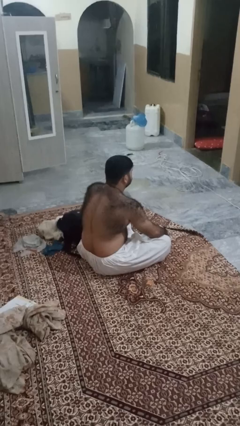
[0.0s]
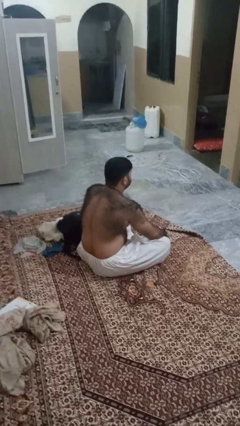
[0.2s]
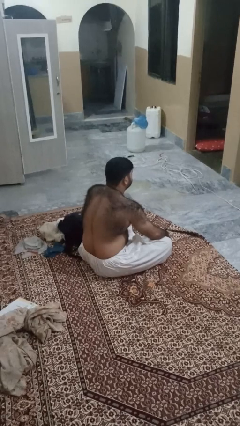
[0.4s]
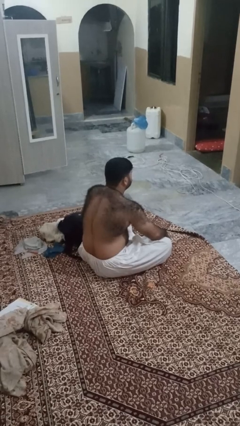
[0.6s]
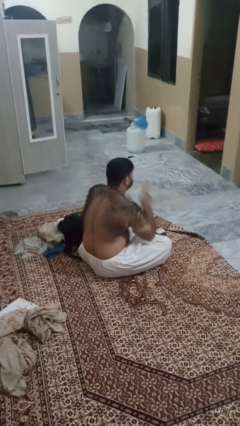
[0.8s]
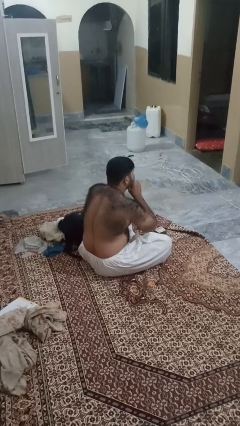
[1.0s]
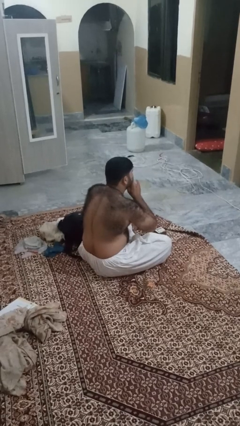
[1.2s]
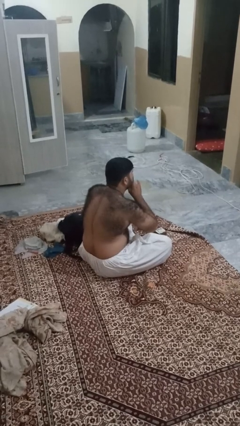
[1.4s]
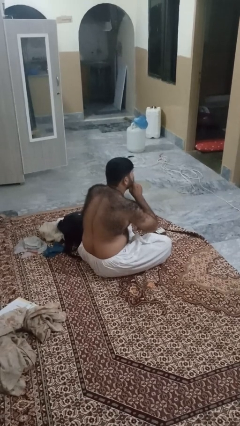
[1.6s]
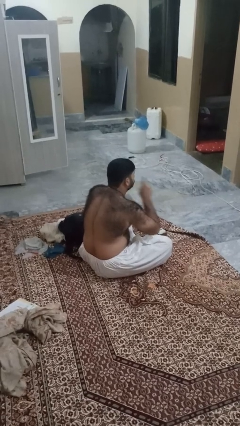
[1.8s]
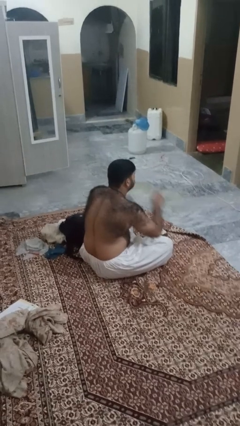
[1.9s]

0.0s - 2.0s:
person gestures be quiet

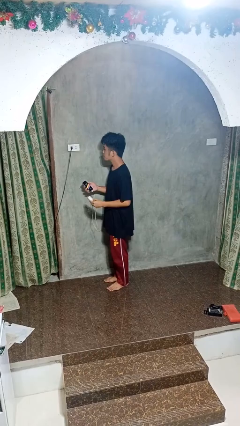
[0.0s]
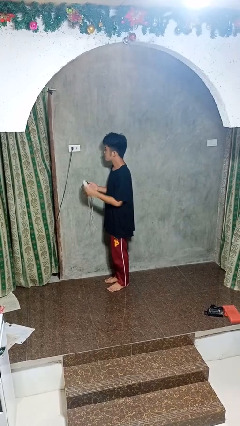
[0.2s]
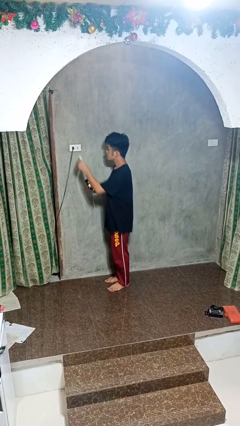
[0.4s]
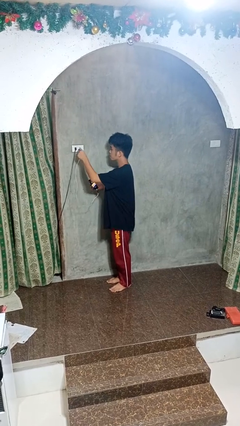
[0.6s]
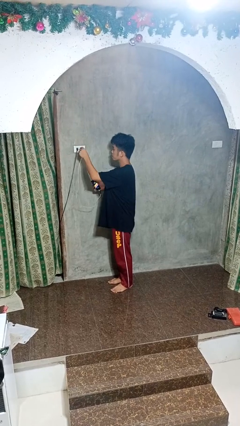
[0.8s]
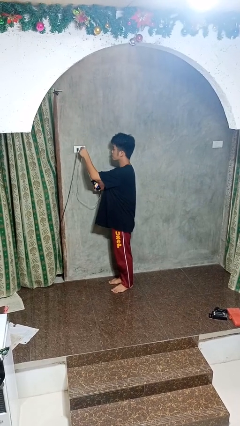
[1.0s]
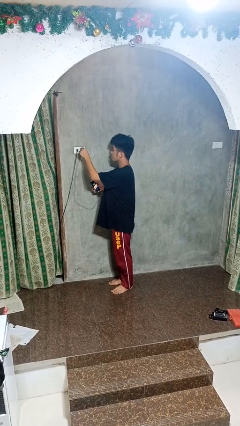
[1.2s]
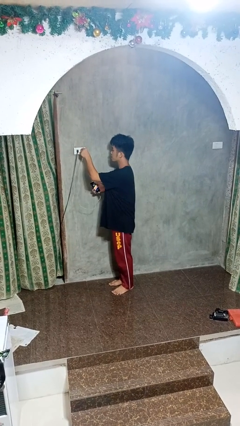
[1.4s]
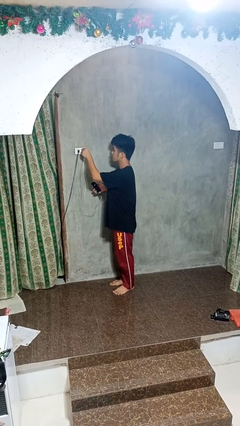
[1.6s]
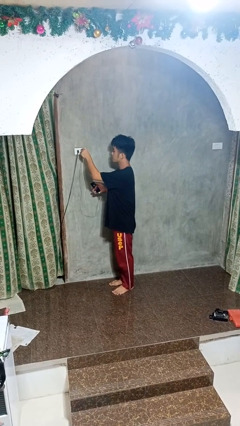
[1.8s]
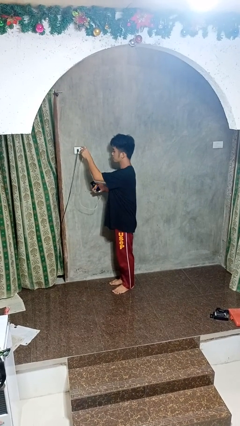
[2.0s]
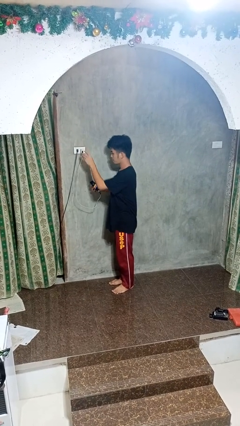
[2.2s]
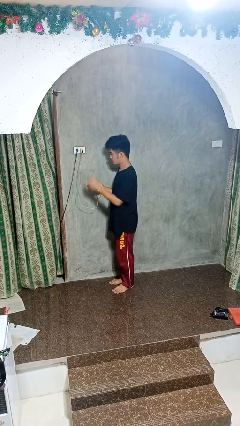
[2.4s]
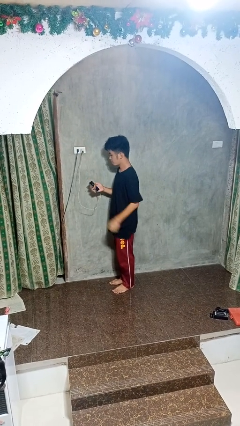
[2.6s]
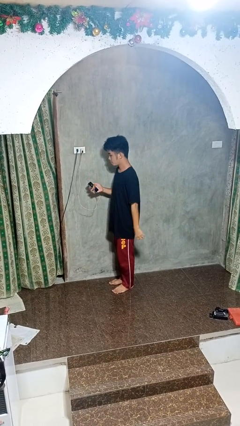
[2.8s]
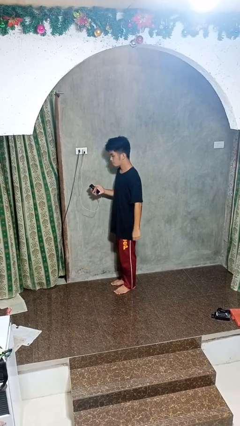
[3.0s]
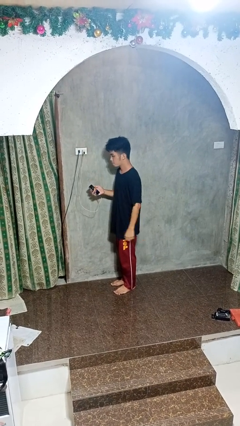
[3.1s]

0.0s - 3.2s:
person plugs into electrical socket

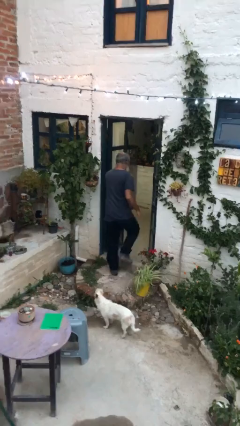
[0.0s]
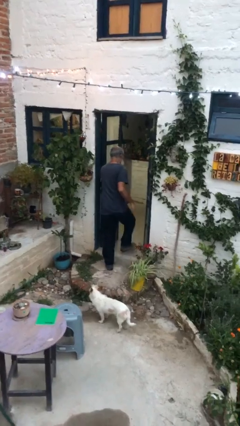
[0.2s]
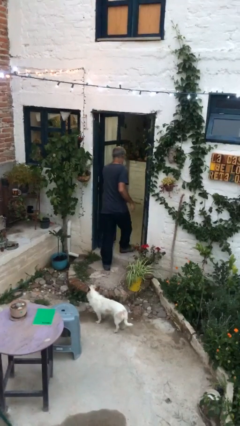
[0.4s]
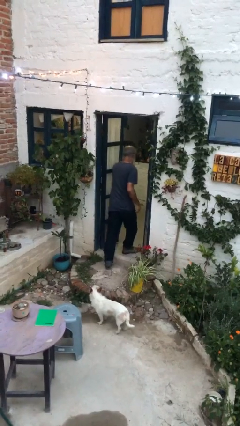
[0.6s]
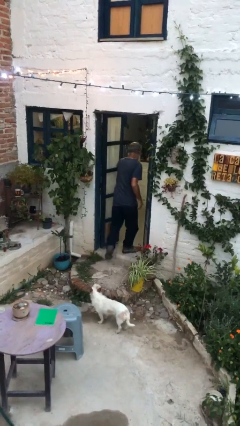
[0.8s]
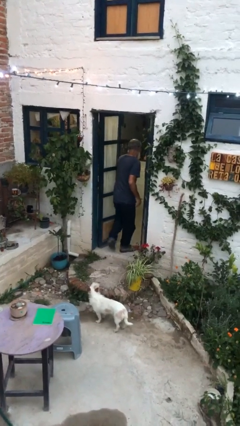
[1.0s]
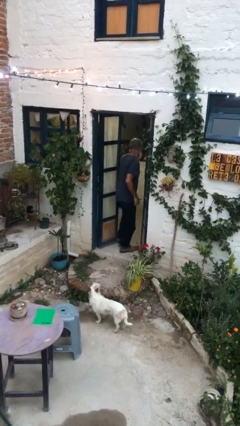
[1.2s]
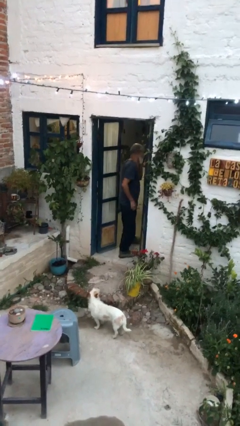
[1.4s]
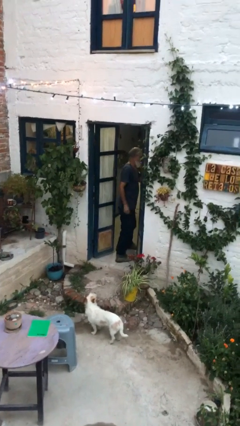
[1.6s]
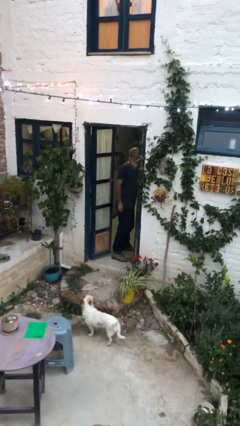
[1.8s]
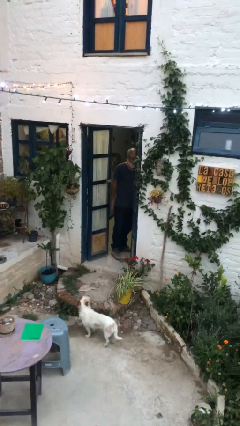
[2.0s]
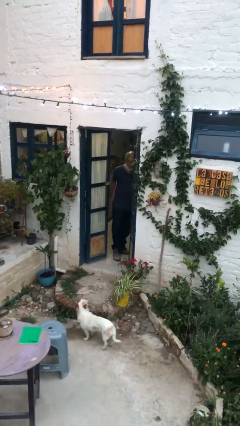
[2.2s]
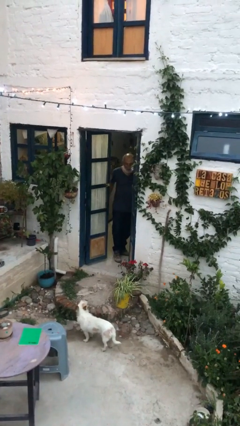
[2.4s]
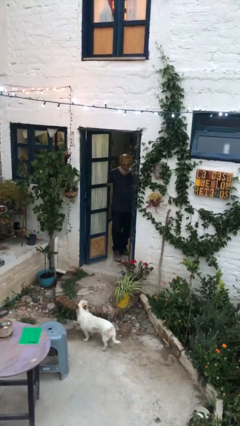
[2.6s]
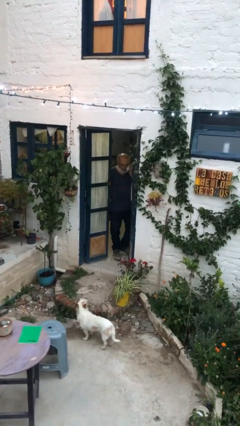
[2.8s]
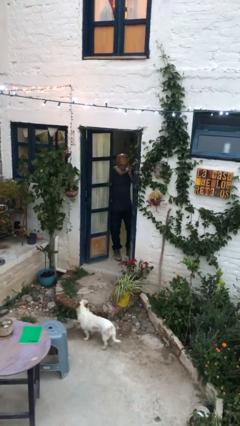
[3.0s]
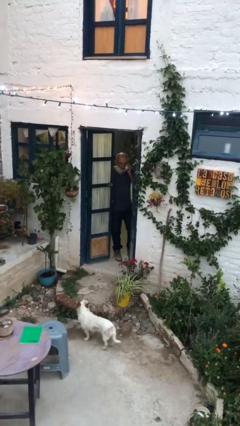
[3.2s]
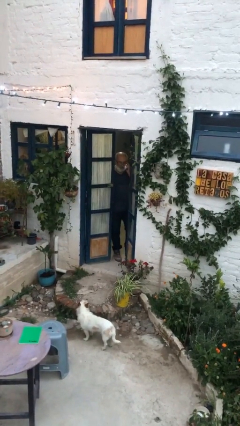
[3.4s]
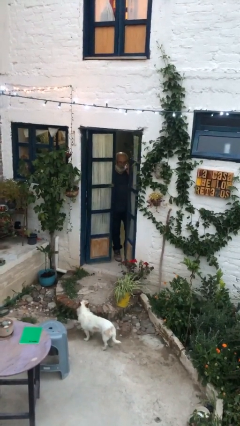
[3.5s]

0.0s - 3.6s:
person exits scene through structure

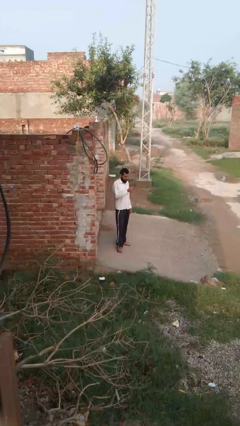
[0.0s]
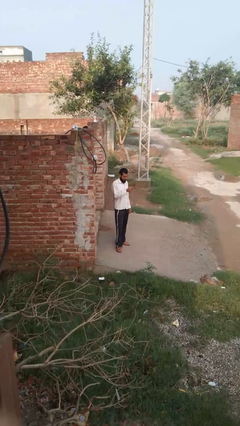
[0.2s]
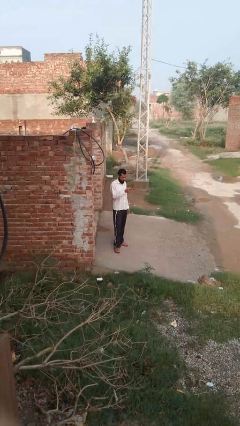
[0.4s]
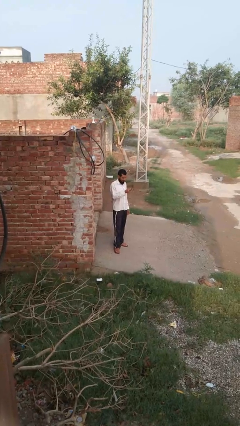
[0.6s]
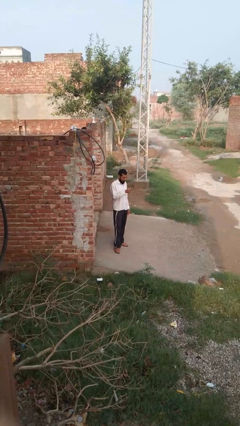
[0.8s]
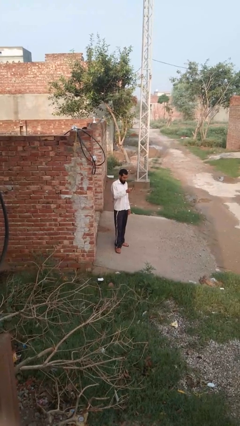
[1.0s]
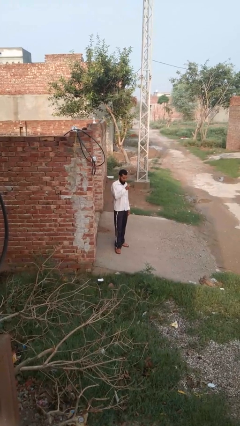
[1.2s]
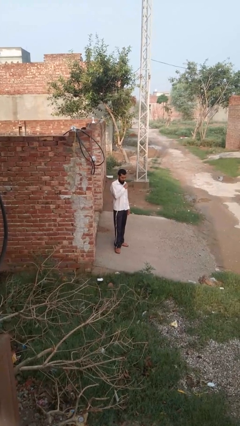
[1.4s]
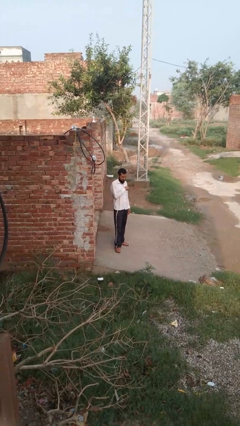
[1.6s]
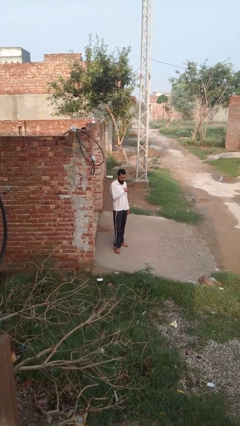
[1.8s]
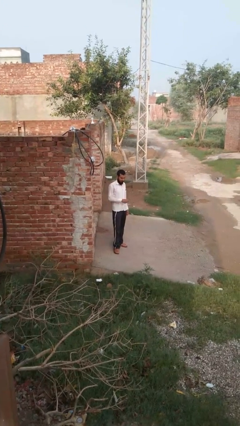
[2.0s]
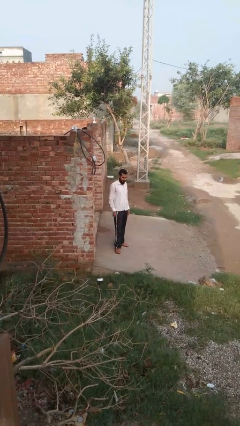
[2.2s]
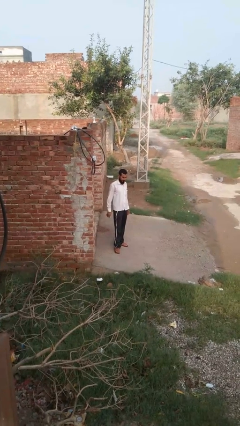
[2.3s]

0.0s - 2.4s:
person puts phone into pocket

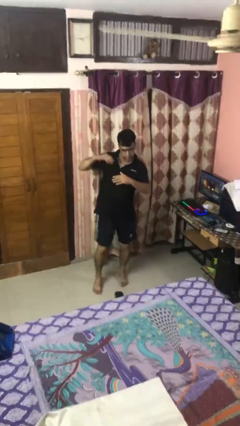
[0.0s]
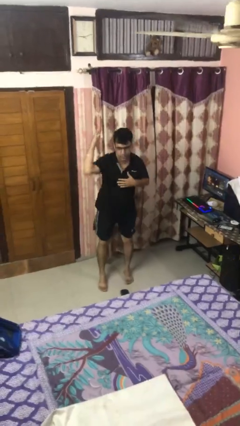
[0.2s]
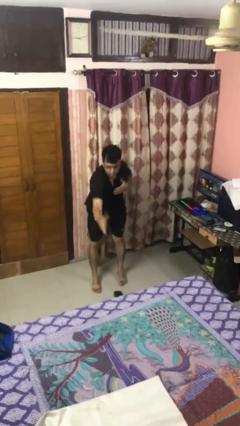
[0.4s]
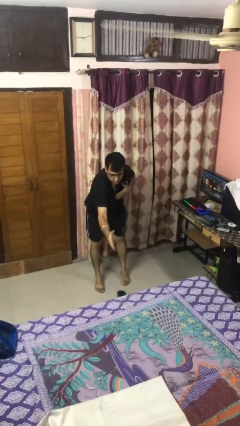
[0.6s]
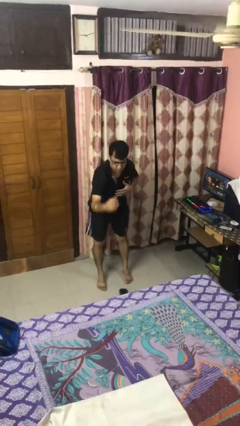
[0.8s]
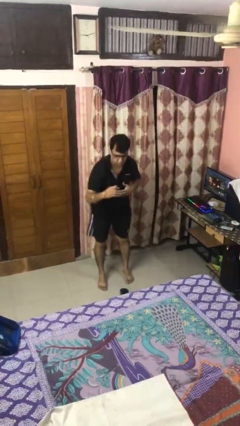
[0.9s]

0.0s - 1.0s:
person karate chop

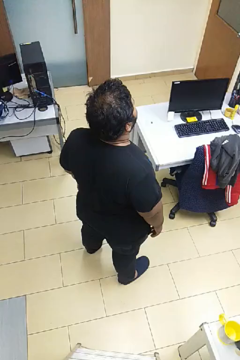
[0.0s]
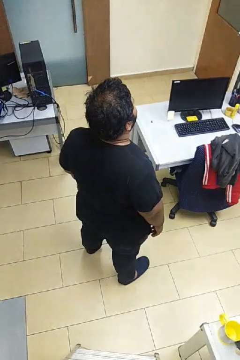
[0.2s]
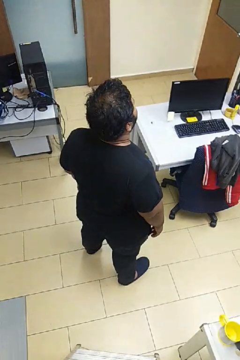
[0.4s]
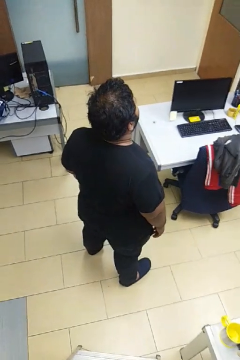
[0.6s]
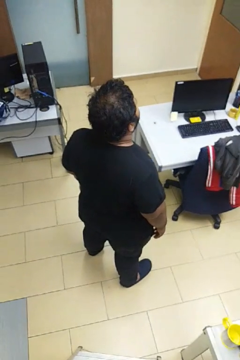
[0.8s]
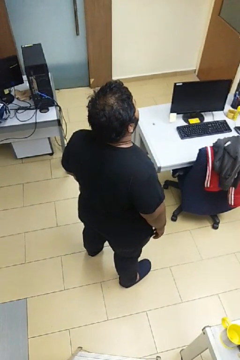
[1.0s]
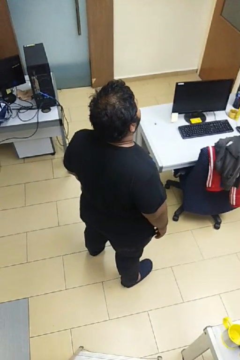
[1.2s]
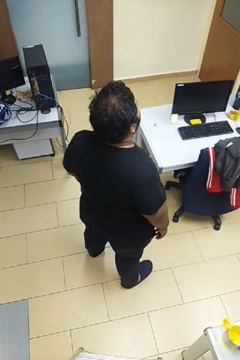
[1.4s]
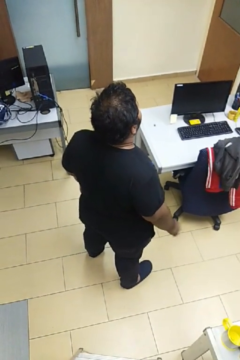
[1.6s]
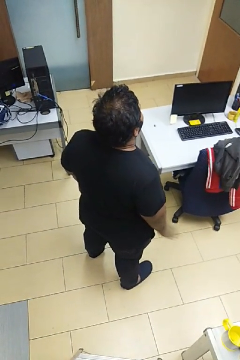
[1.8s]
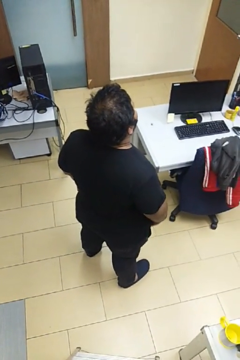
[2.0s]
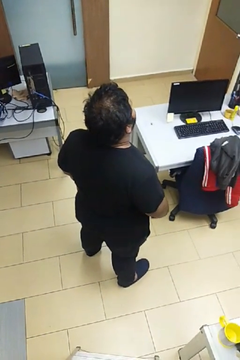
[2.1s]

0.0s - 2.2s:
person slaps hands on thighs

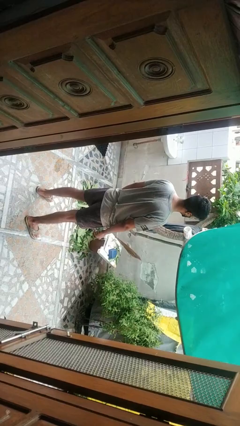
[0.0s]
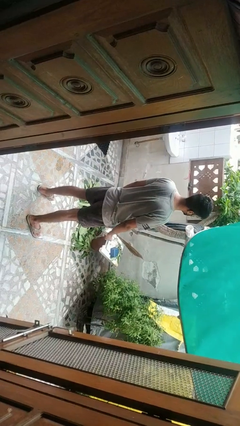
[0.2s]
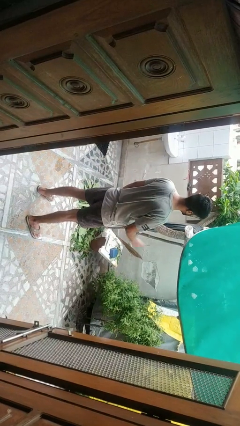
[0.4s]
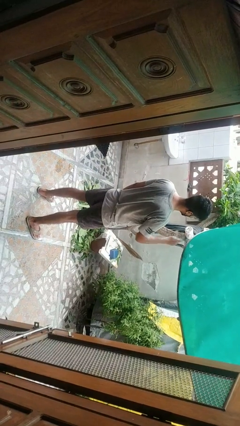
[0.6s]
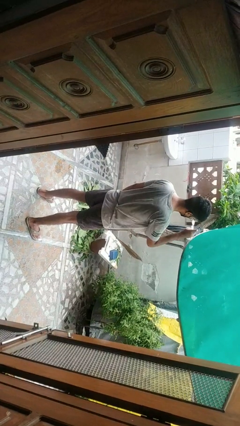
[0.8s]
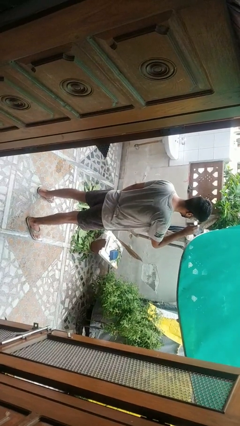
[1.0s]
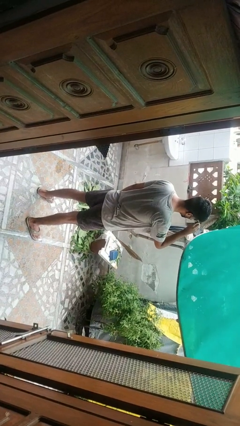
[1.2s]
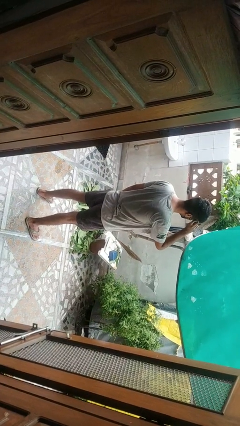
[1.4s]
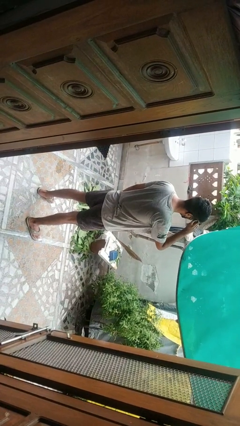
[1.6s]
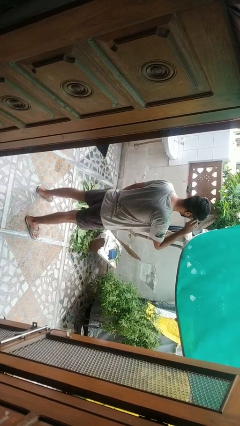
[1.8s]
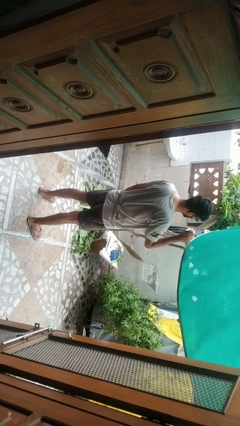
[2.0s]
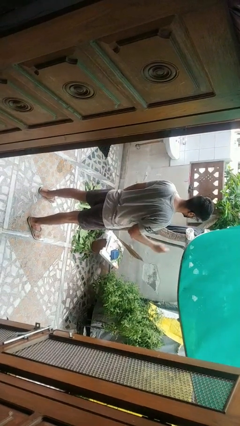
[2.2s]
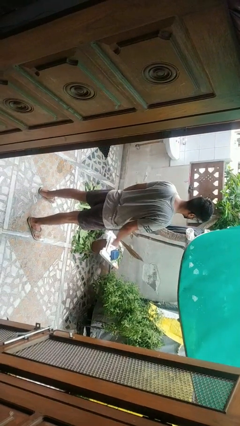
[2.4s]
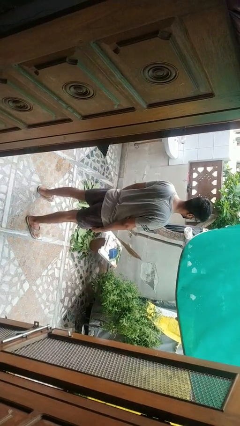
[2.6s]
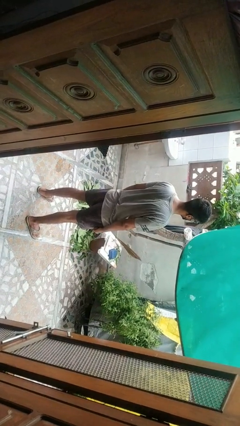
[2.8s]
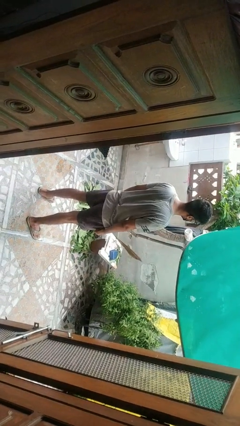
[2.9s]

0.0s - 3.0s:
person puts on glasses
